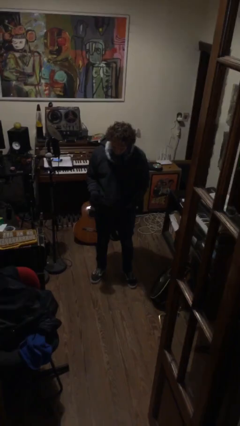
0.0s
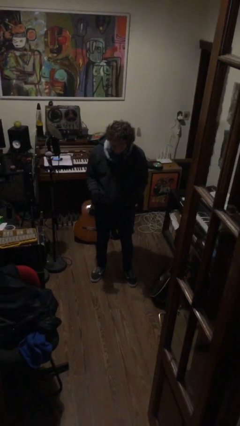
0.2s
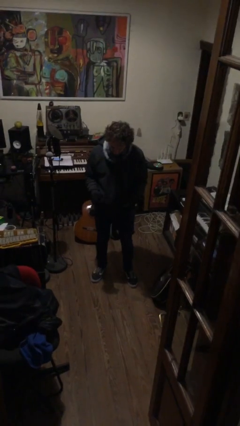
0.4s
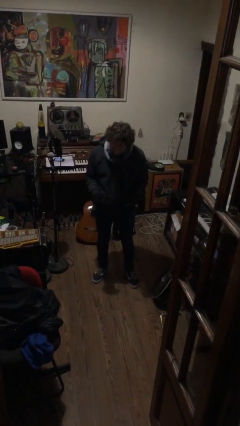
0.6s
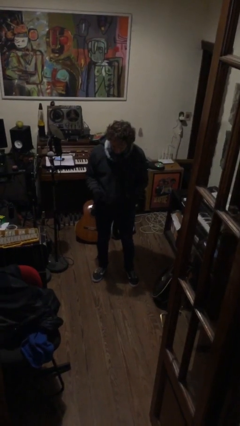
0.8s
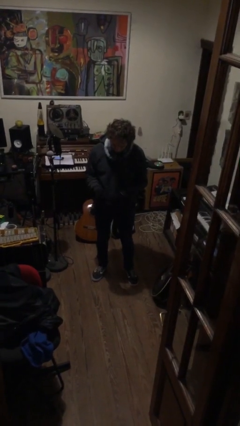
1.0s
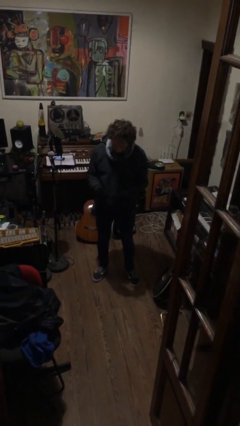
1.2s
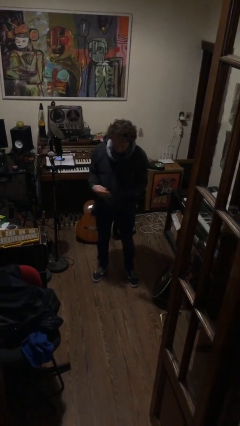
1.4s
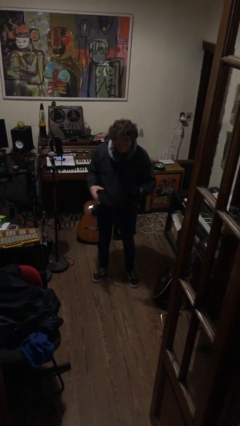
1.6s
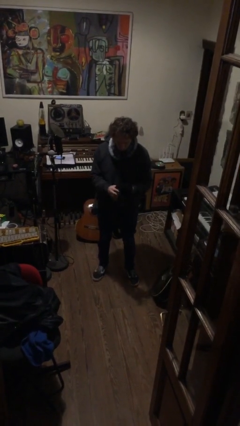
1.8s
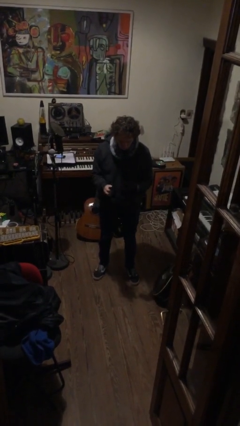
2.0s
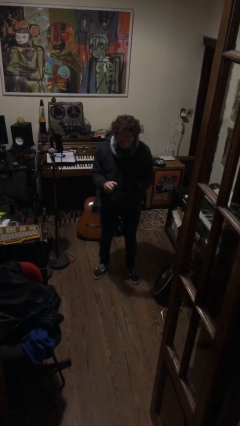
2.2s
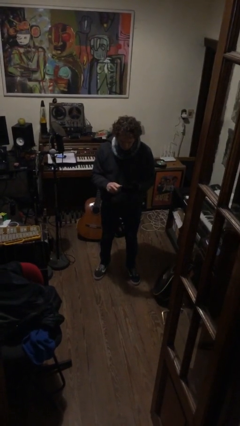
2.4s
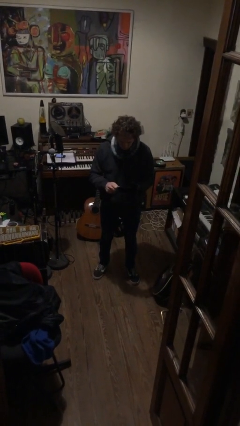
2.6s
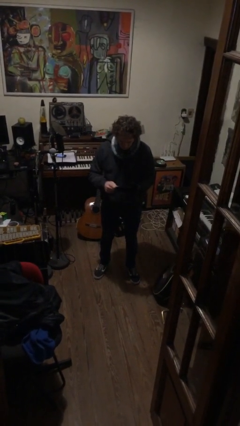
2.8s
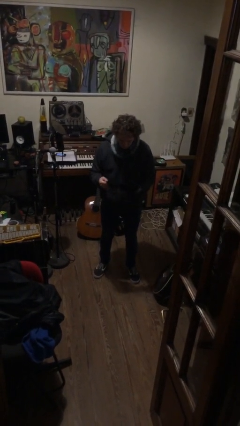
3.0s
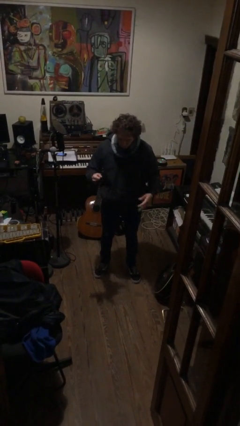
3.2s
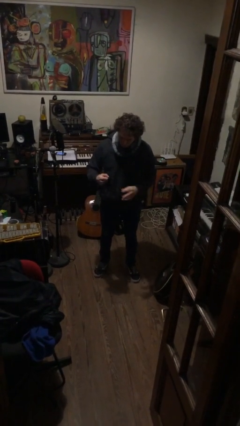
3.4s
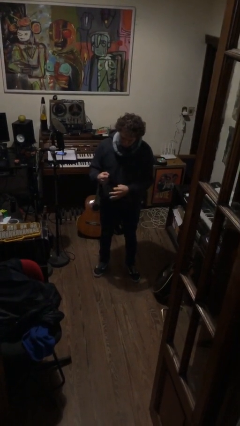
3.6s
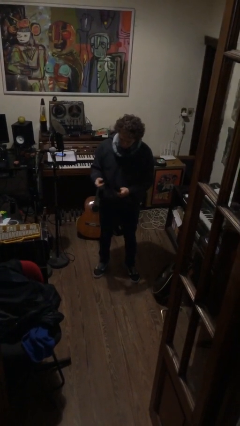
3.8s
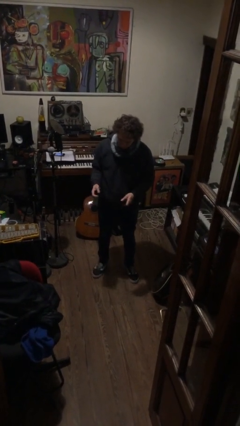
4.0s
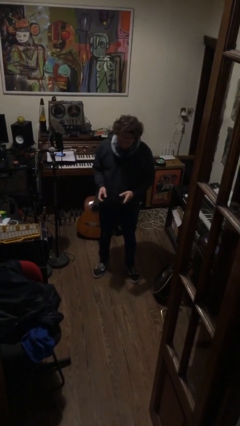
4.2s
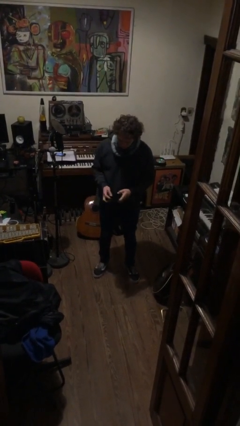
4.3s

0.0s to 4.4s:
person takes off gloves

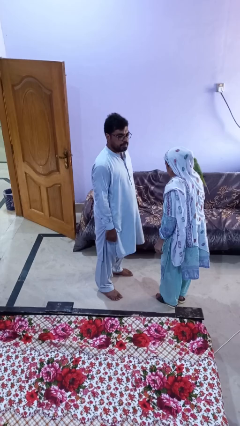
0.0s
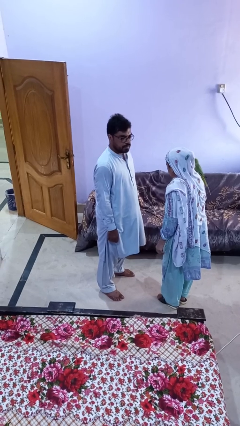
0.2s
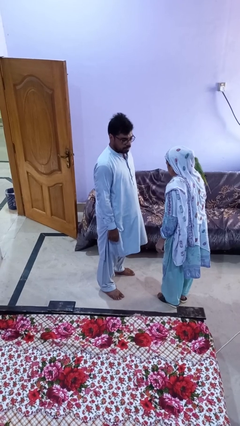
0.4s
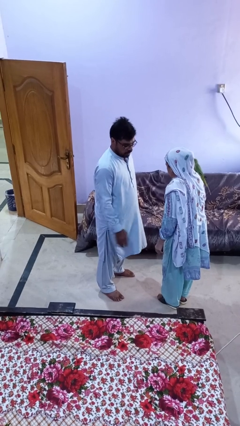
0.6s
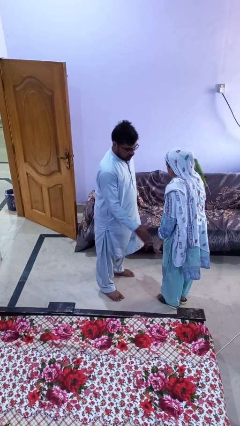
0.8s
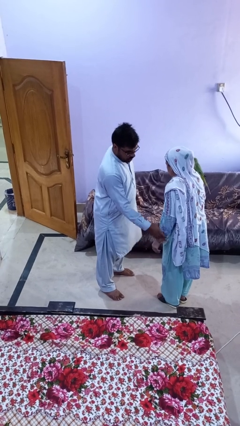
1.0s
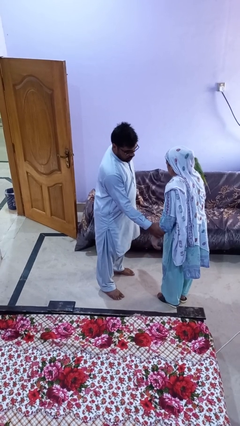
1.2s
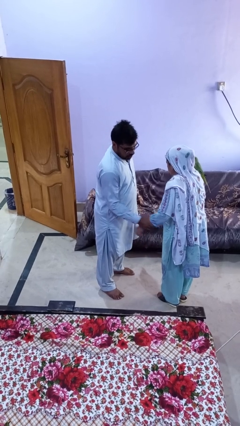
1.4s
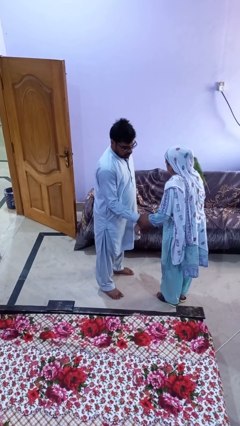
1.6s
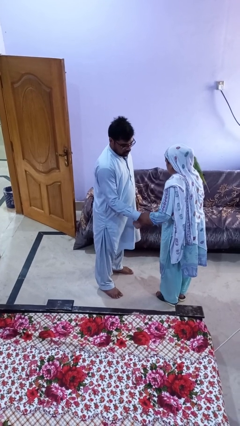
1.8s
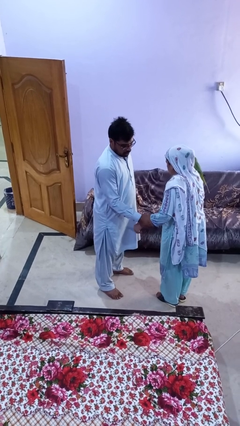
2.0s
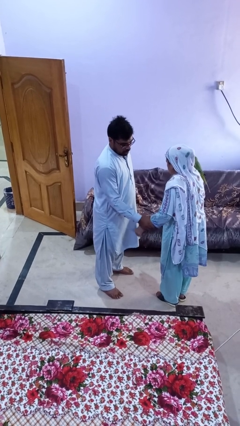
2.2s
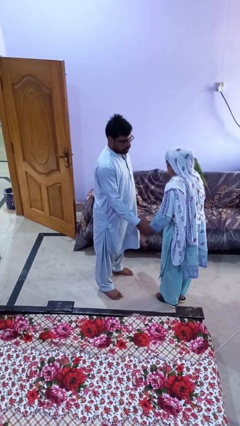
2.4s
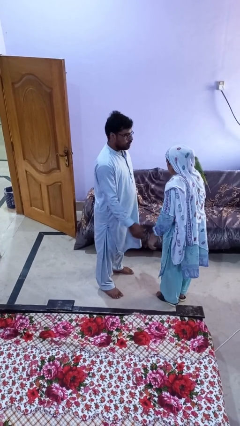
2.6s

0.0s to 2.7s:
person grabs person by forearm

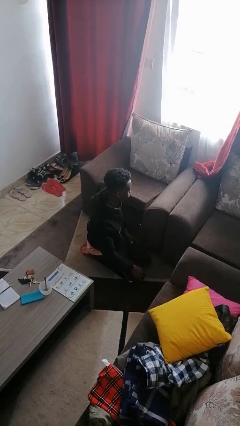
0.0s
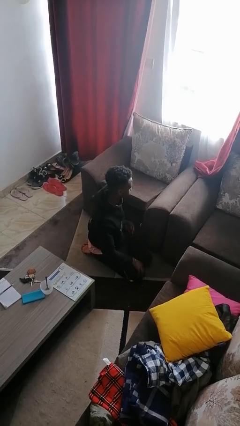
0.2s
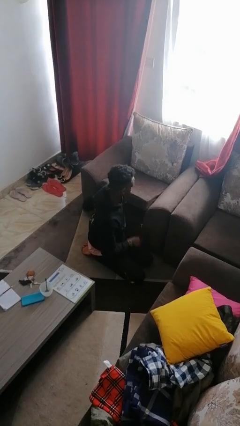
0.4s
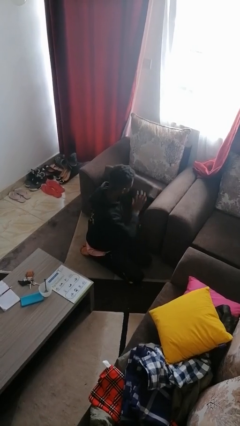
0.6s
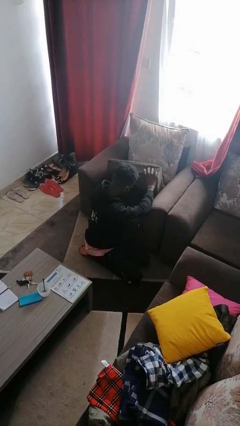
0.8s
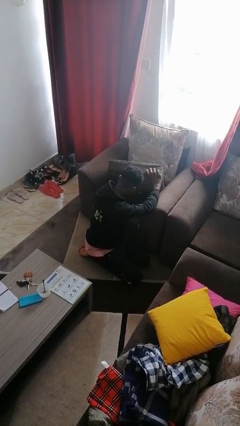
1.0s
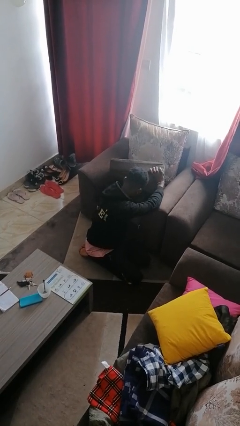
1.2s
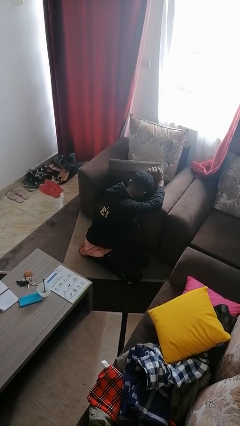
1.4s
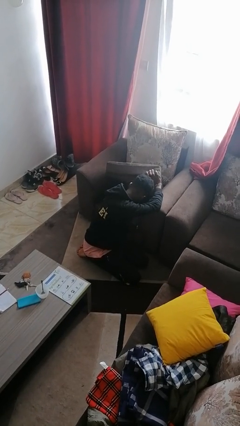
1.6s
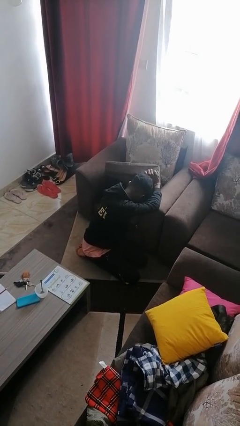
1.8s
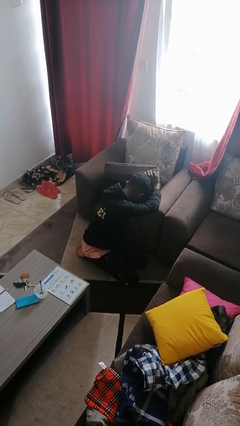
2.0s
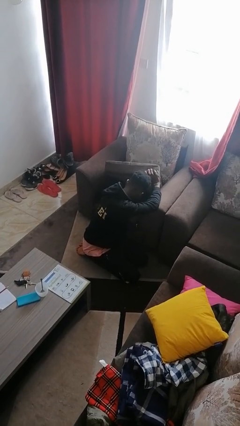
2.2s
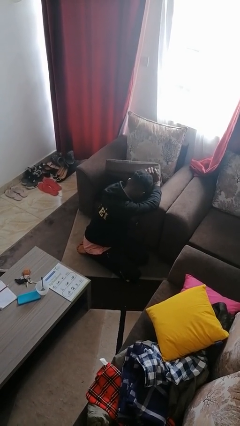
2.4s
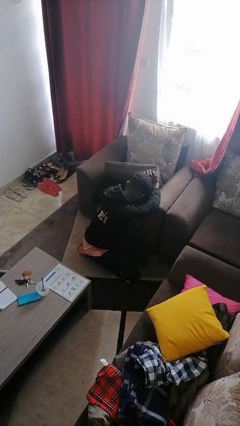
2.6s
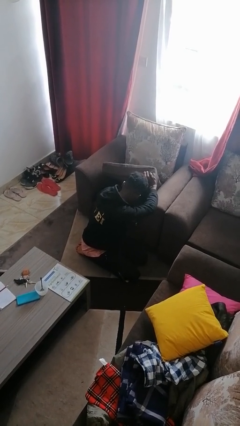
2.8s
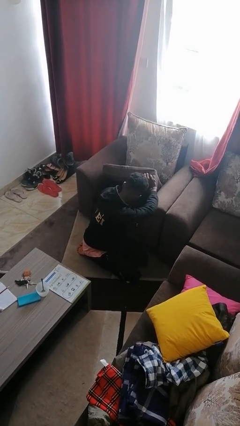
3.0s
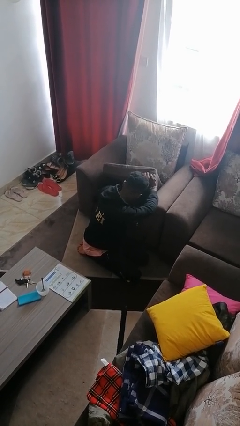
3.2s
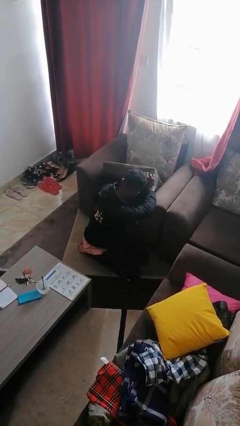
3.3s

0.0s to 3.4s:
person searches in couch

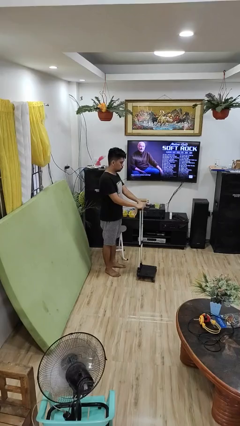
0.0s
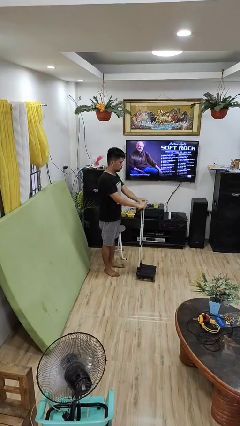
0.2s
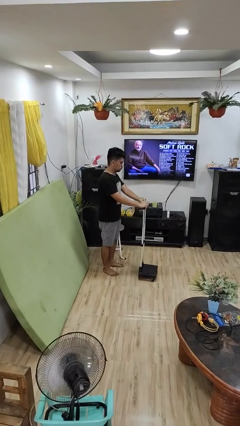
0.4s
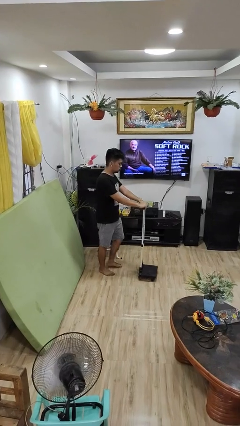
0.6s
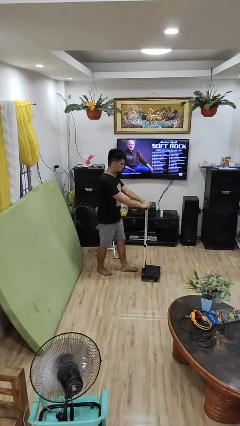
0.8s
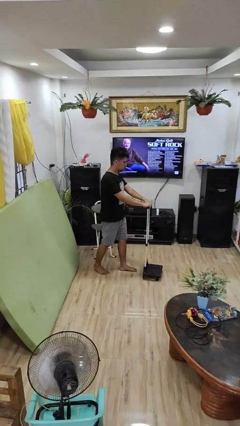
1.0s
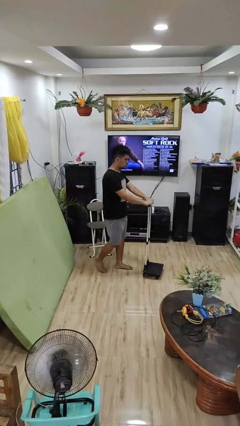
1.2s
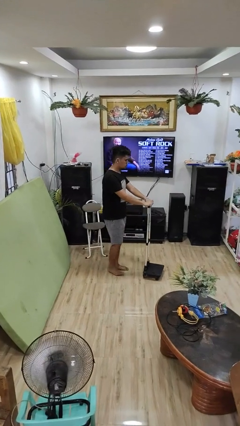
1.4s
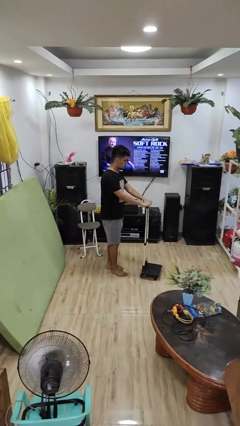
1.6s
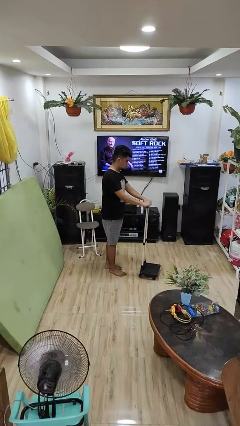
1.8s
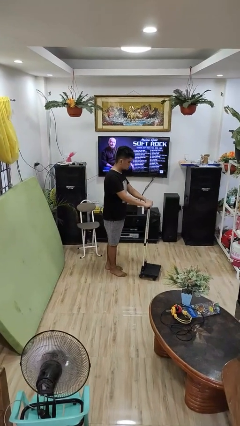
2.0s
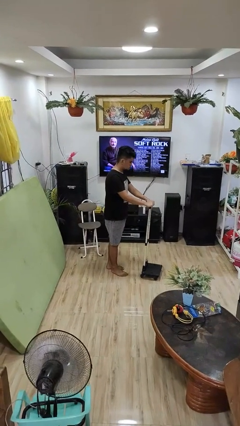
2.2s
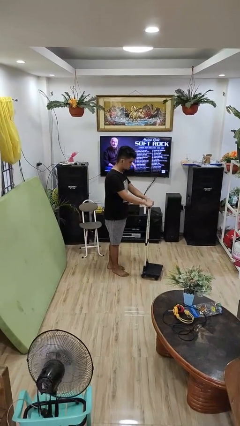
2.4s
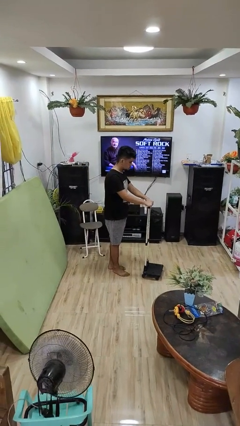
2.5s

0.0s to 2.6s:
person pushes wheeled cart

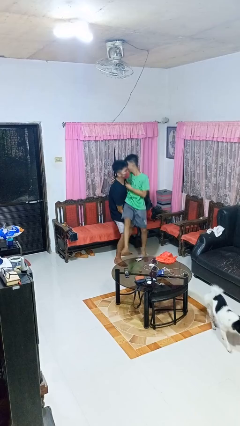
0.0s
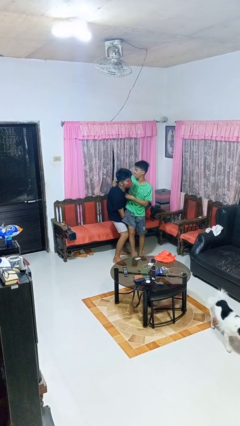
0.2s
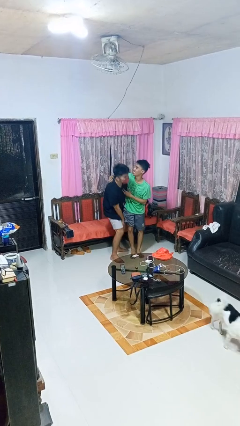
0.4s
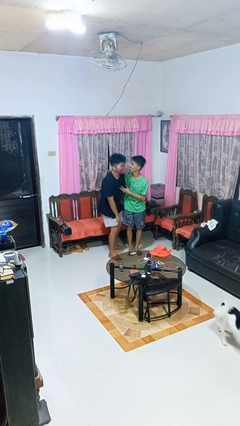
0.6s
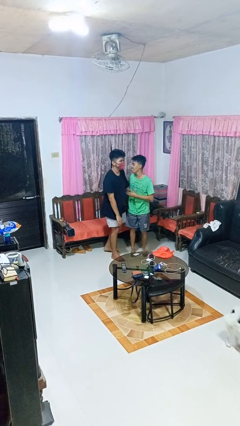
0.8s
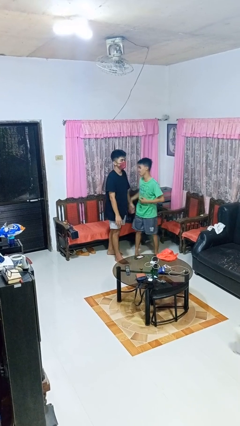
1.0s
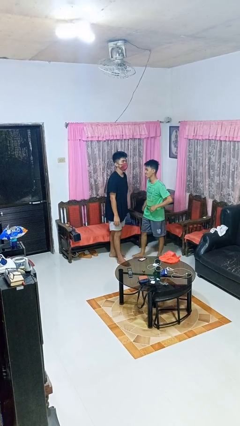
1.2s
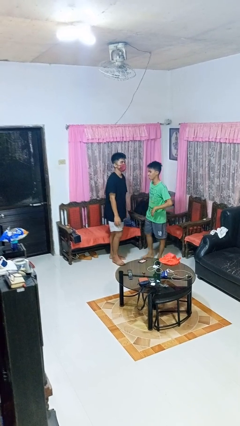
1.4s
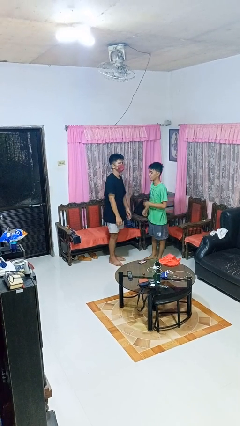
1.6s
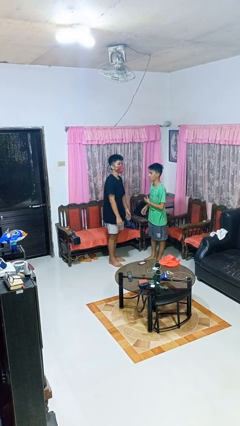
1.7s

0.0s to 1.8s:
person puts down person

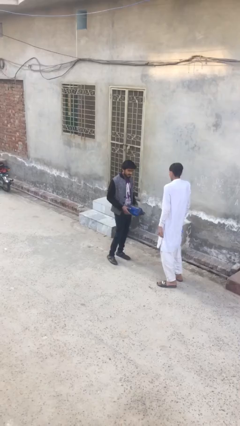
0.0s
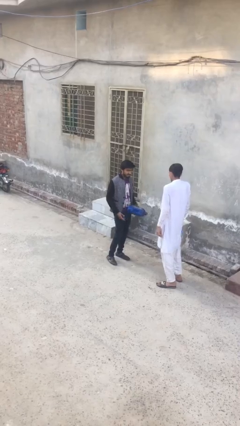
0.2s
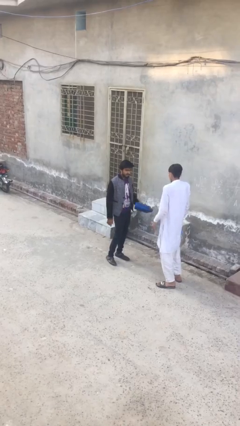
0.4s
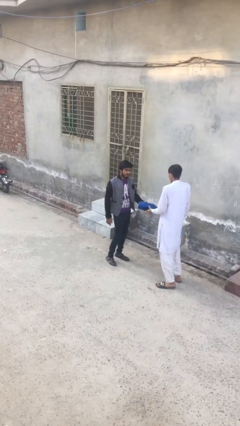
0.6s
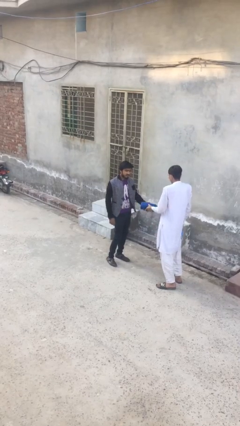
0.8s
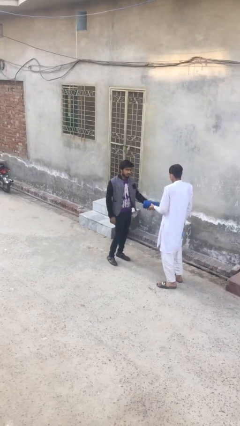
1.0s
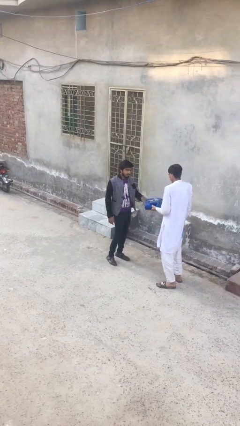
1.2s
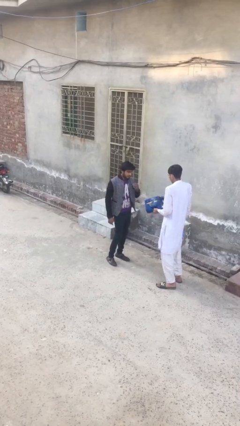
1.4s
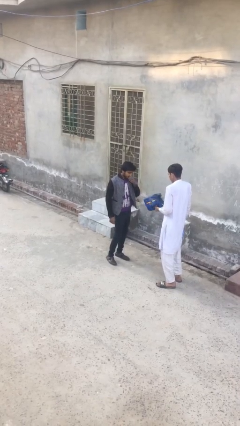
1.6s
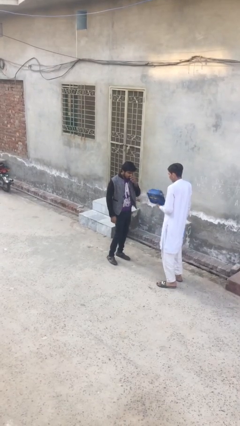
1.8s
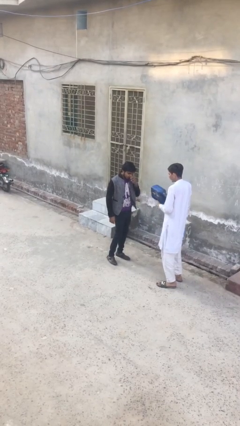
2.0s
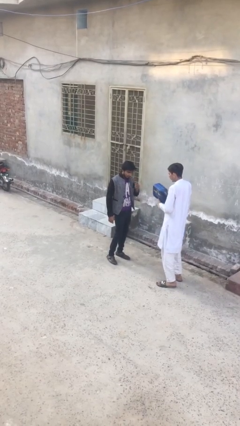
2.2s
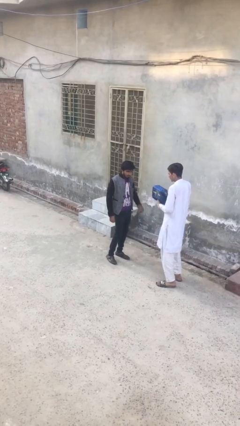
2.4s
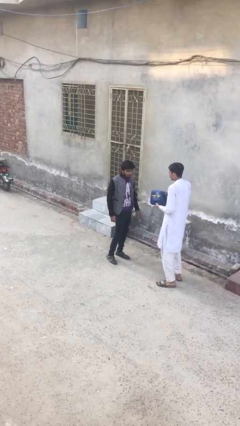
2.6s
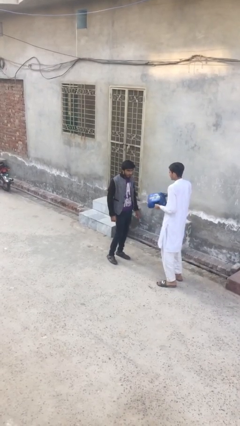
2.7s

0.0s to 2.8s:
person transfers object to person
